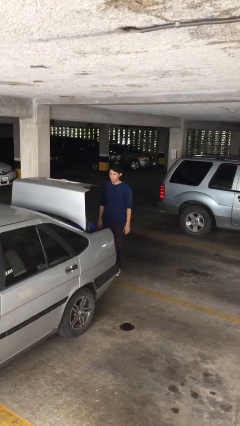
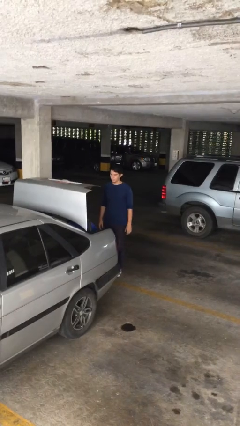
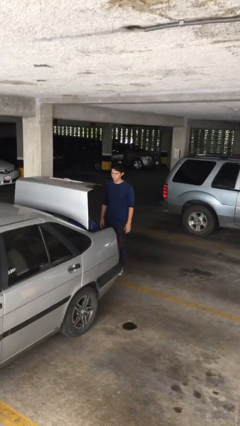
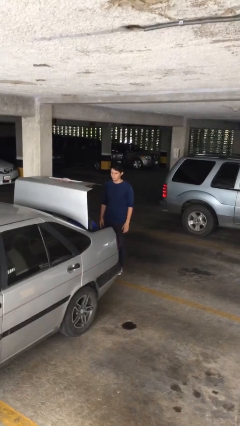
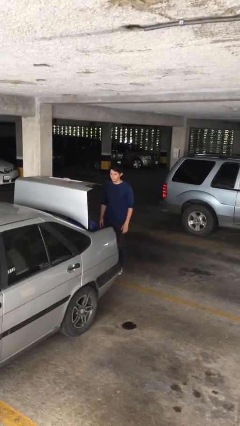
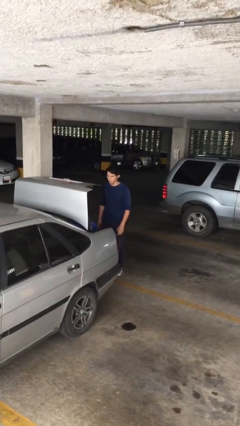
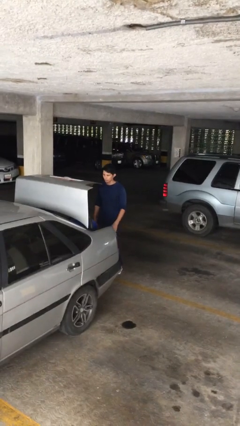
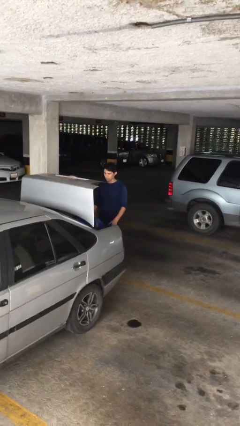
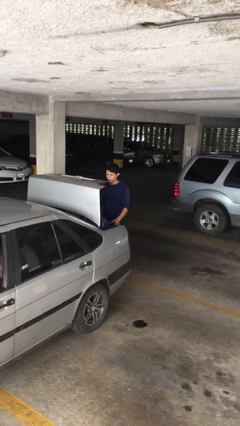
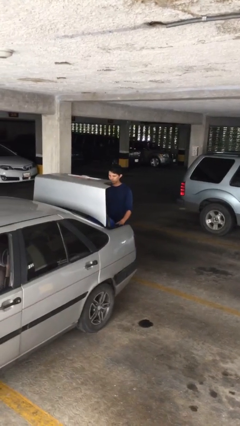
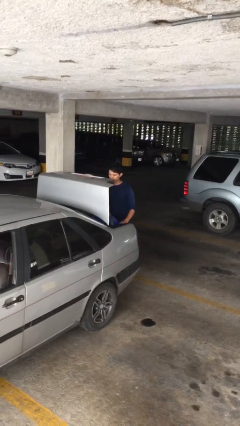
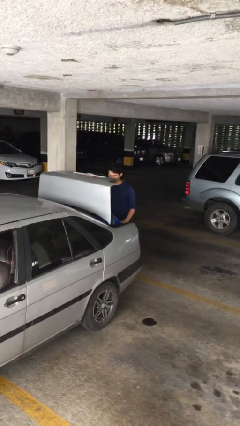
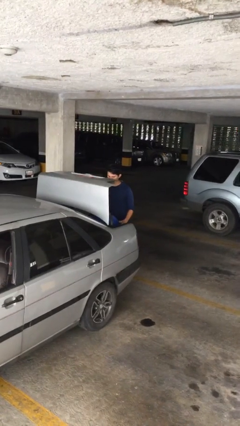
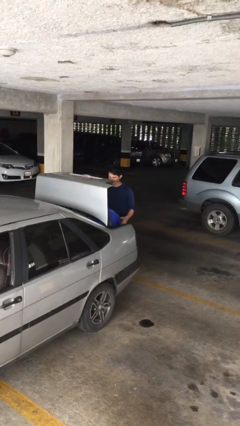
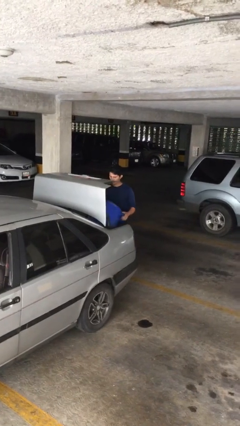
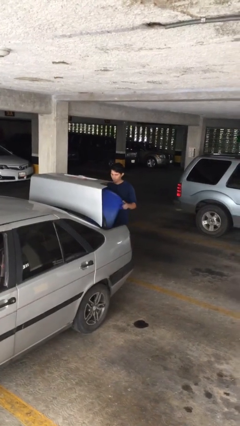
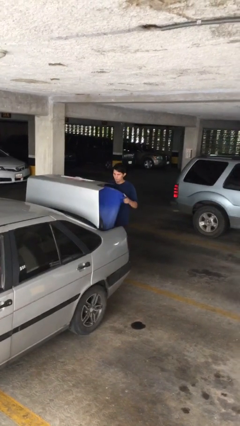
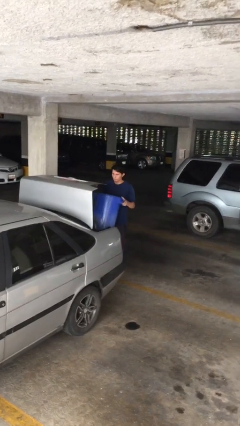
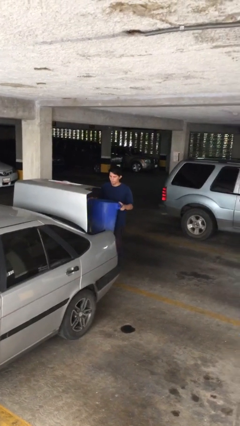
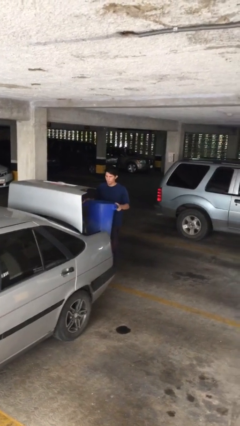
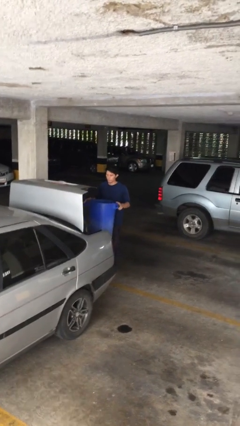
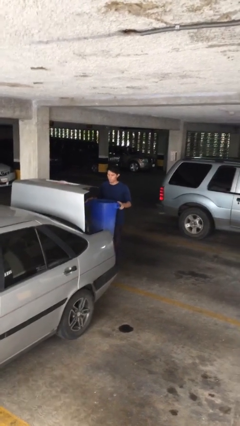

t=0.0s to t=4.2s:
person unloads car

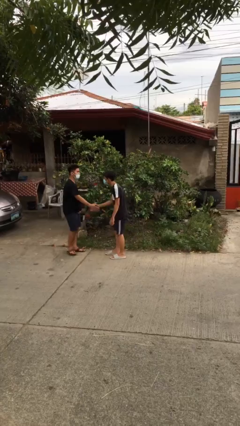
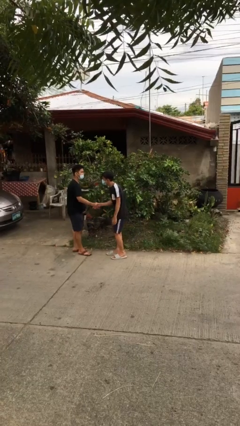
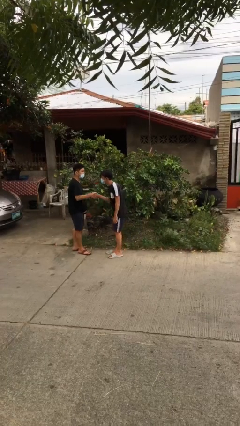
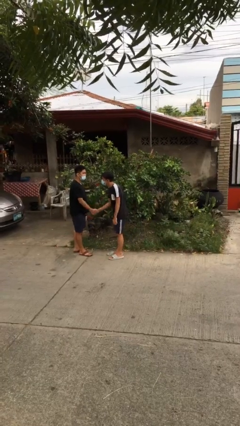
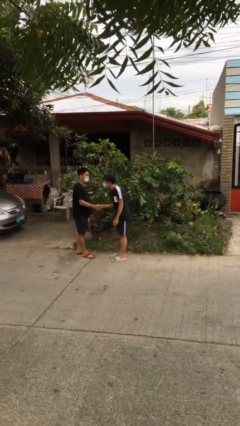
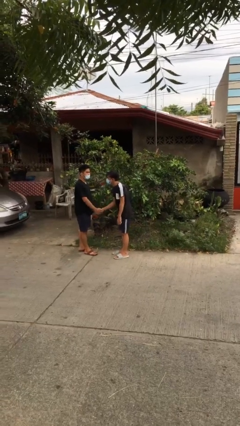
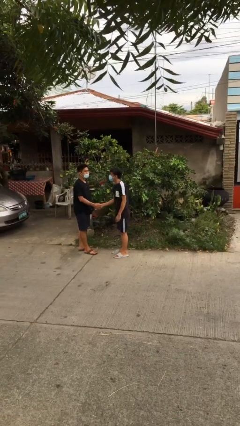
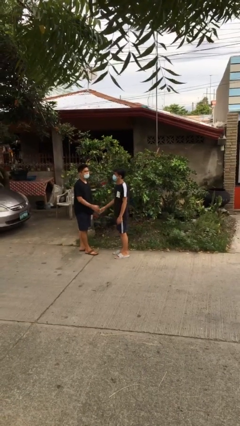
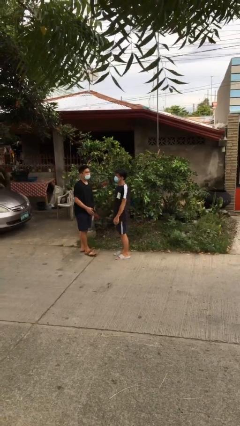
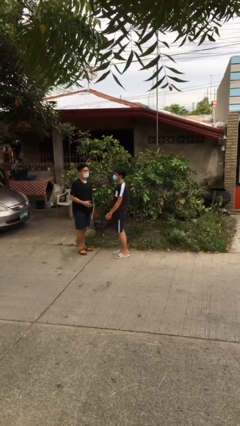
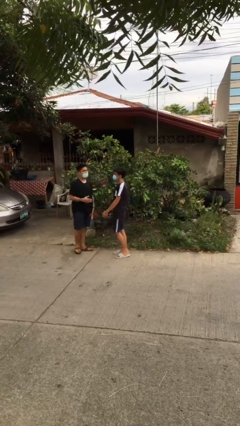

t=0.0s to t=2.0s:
person shakes hand

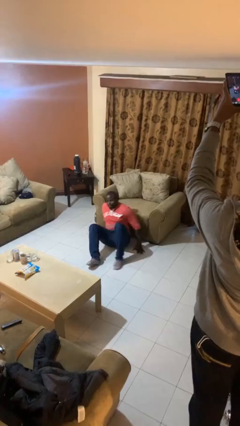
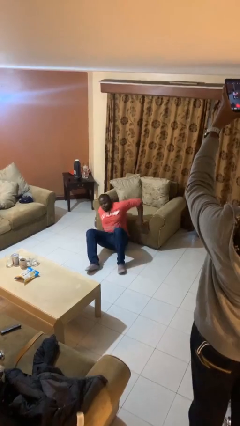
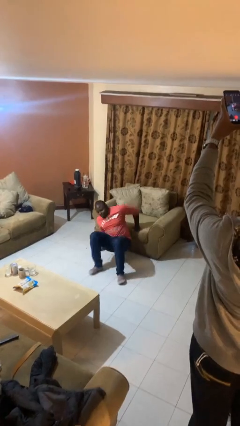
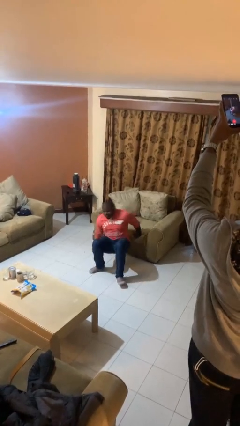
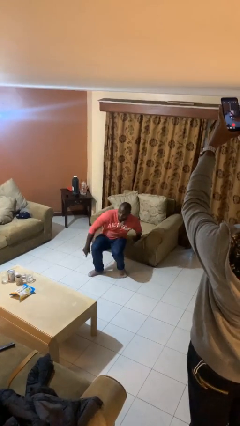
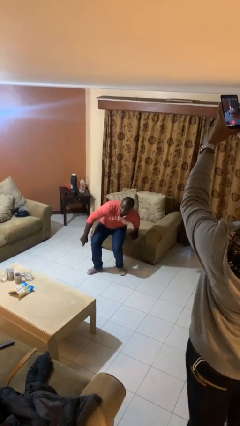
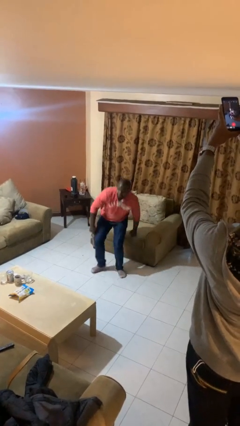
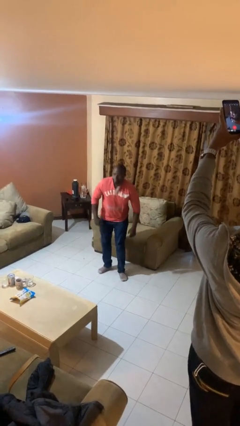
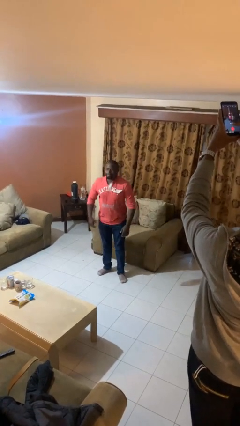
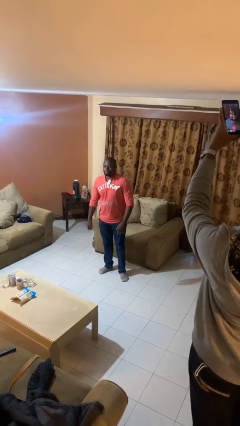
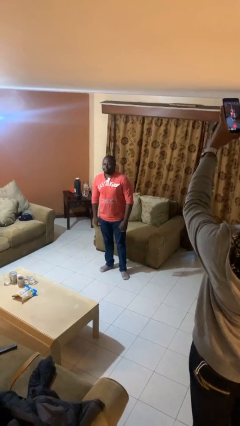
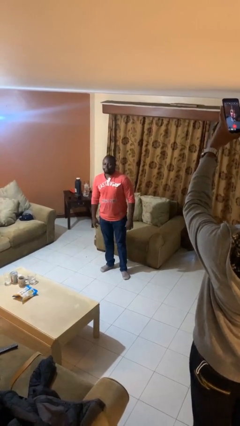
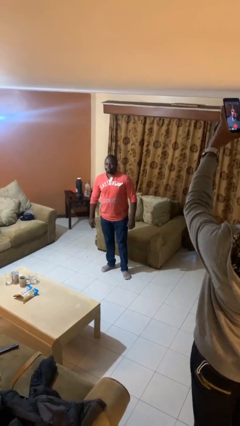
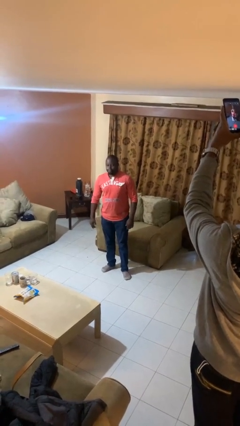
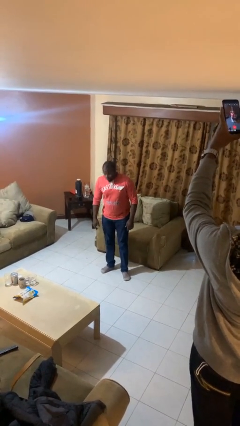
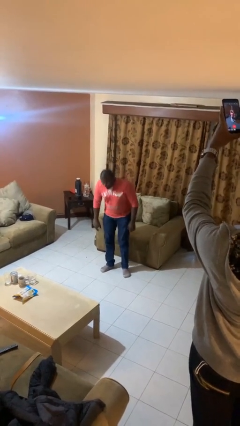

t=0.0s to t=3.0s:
person stands up from floor

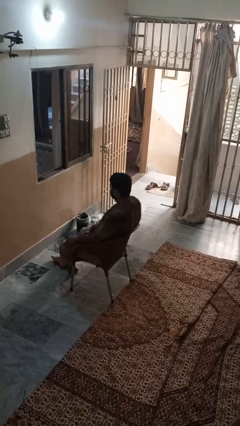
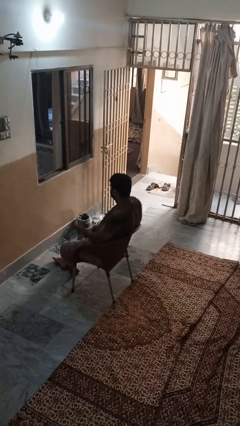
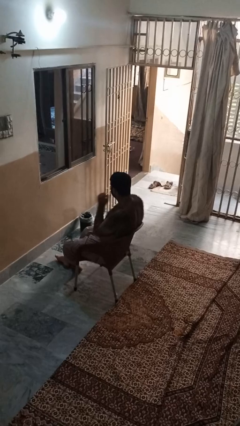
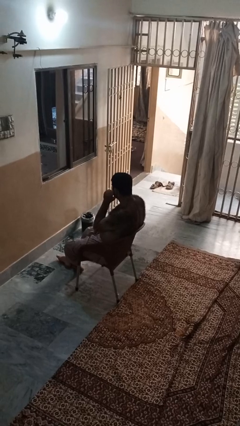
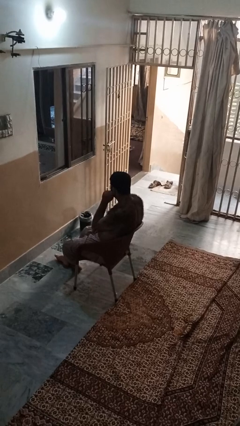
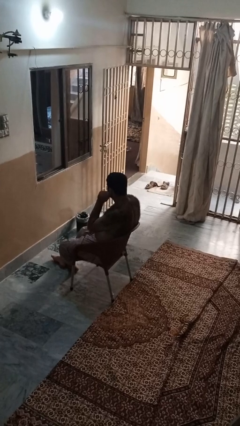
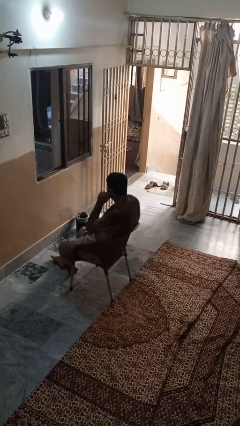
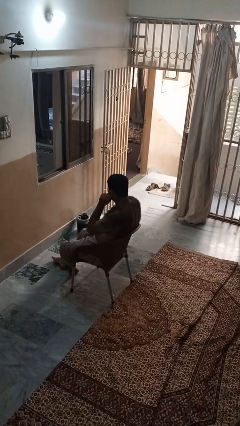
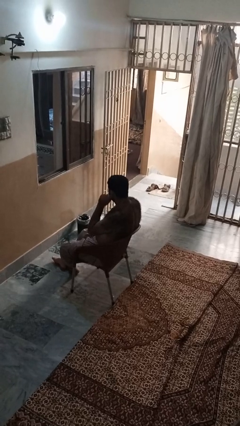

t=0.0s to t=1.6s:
person touches earlobe

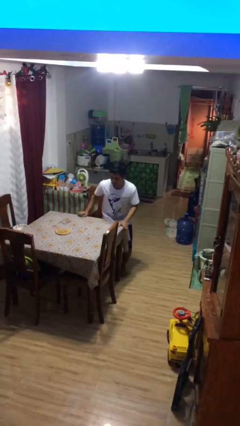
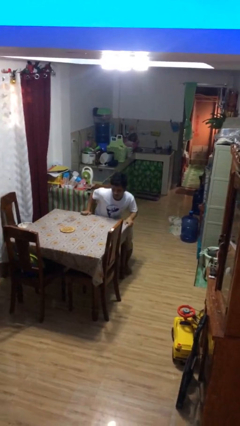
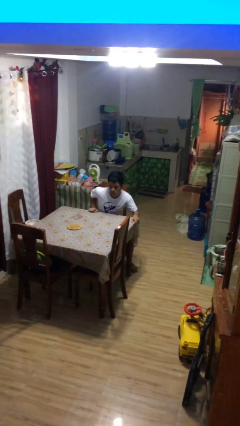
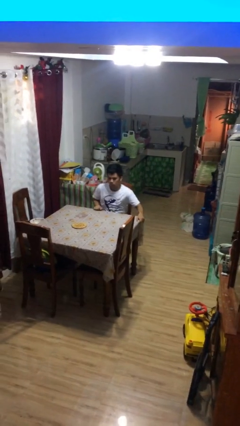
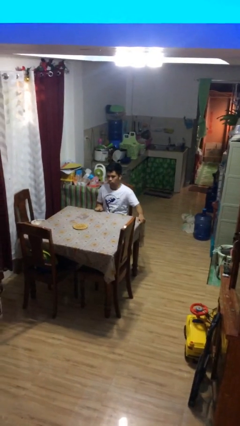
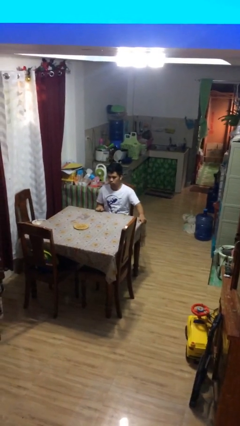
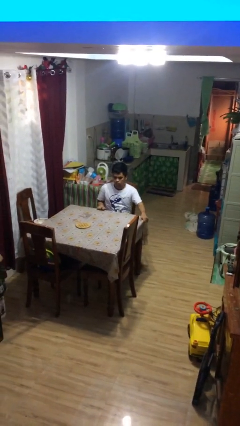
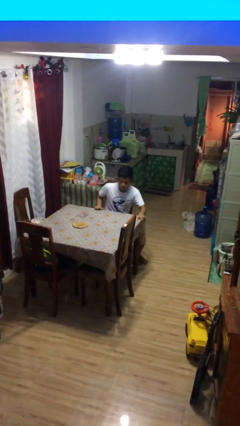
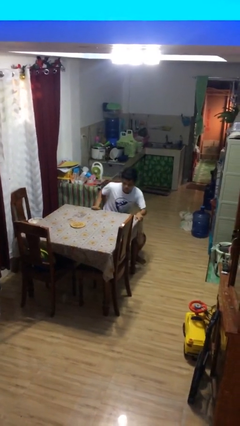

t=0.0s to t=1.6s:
person sits down

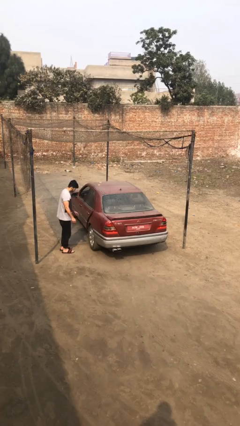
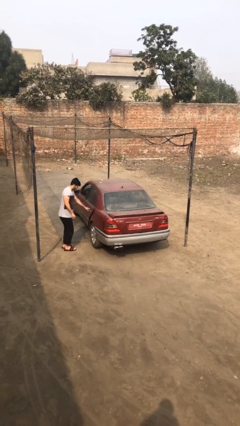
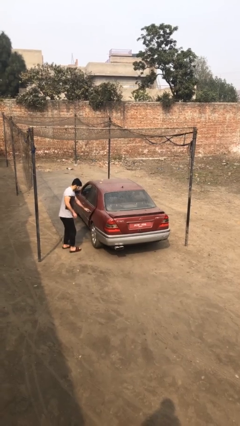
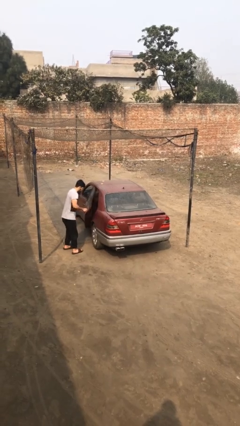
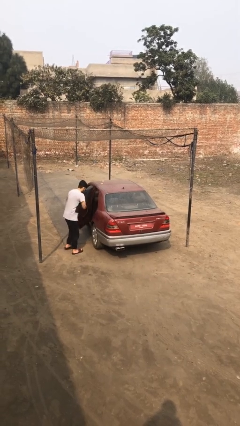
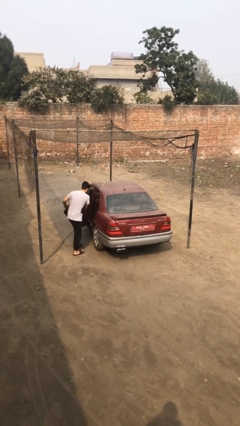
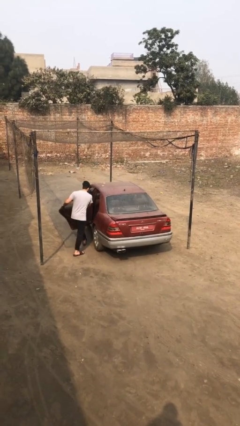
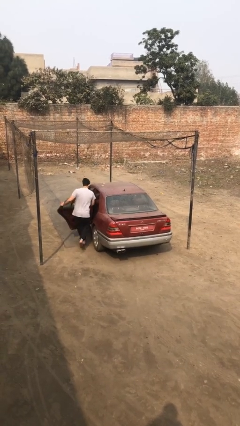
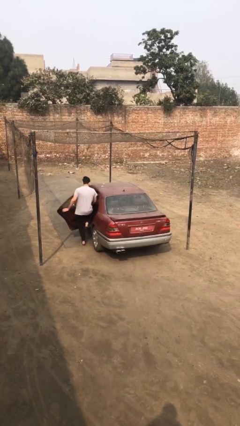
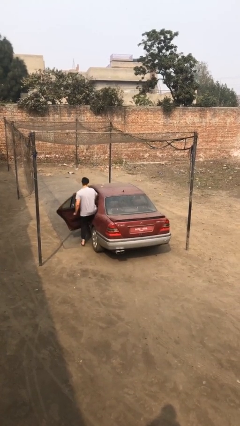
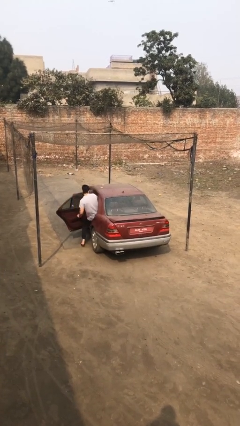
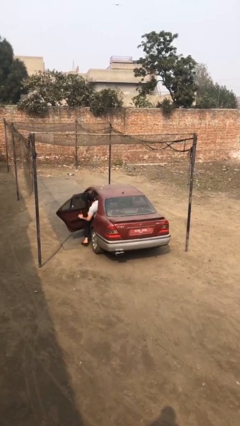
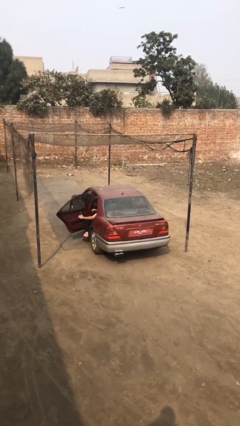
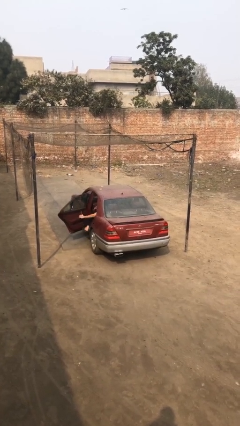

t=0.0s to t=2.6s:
car picks up person

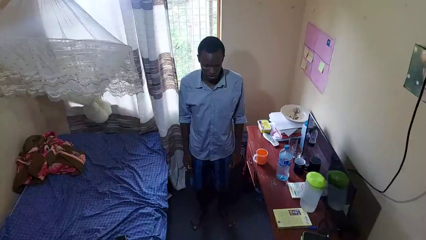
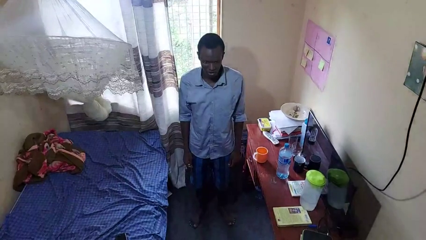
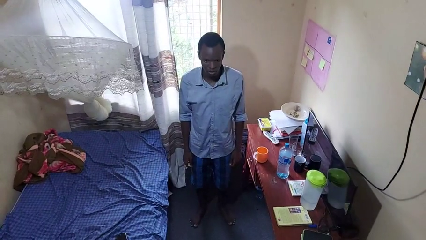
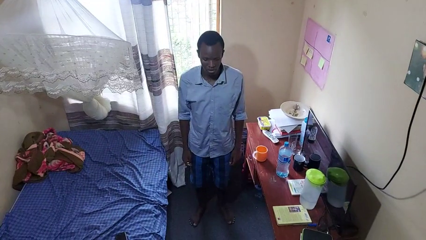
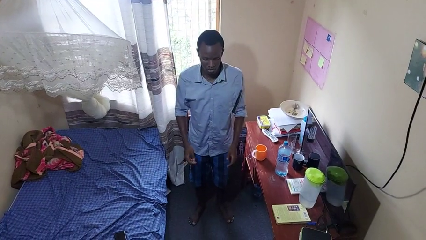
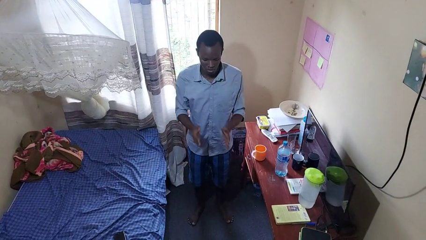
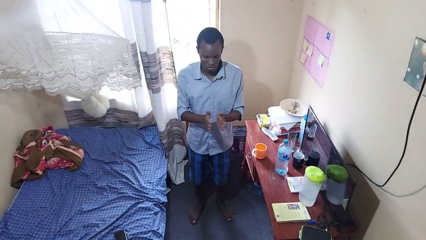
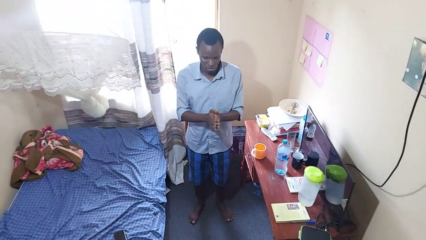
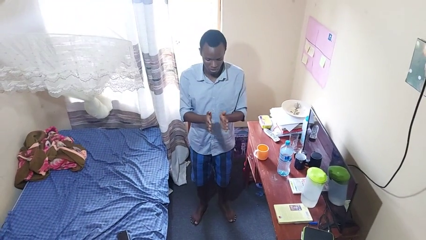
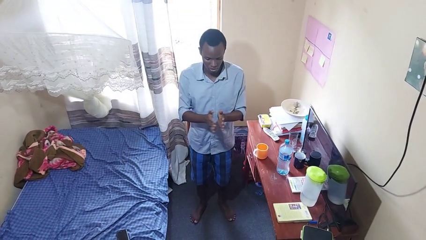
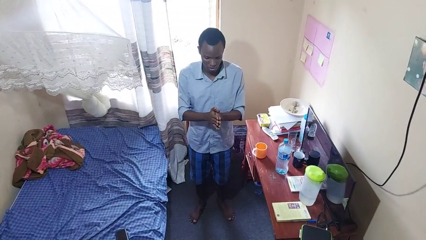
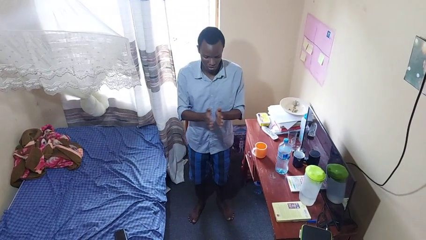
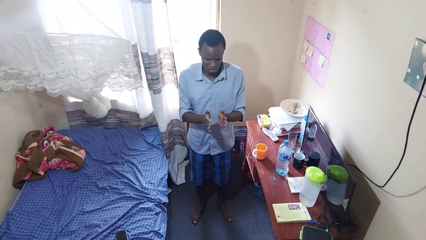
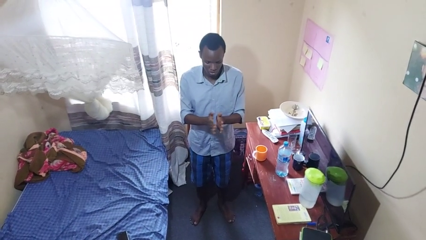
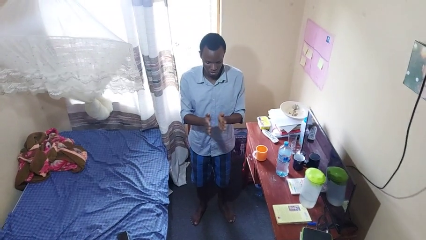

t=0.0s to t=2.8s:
person claps hands
